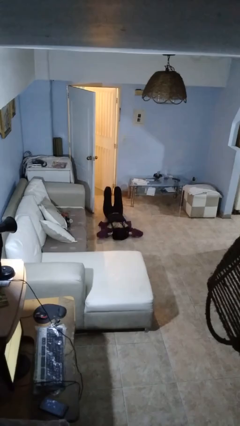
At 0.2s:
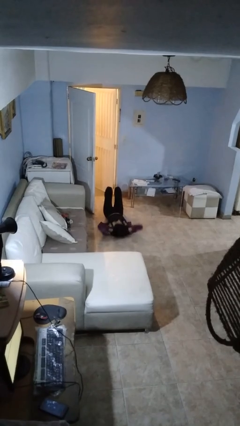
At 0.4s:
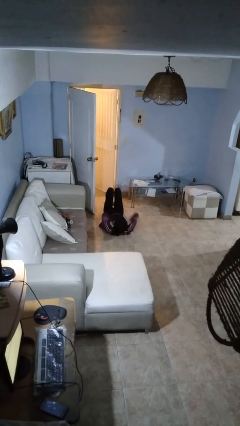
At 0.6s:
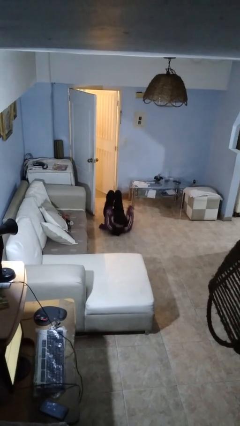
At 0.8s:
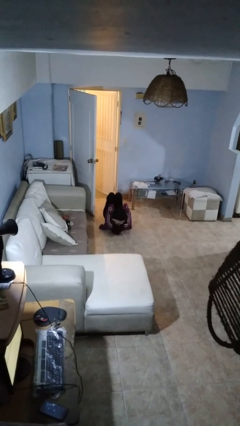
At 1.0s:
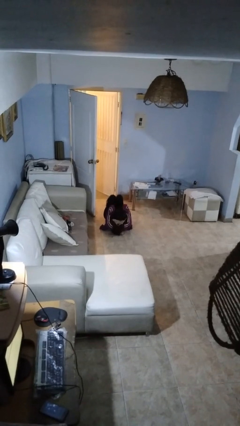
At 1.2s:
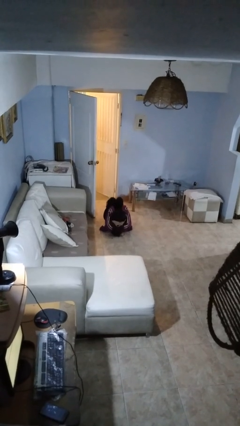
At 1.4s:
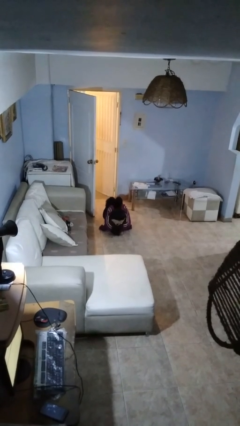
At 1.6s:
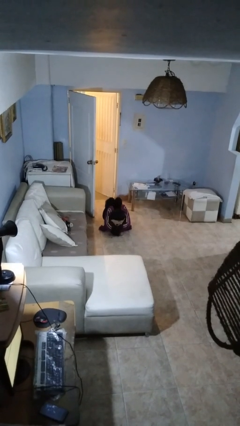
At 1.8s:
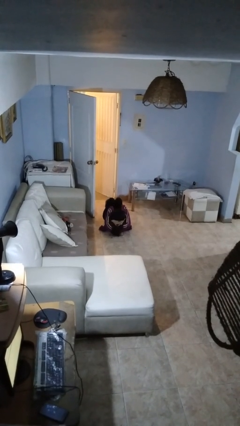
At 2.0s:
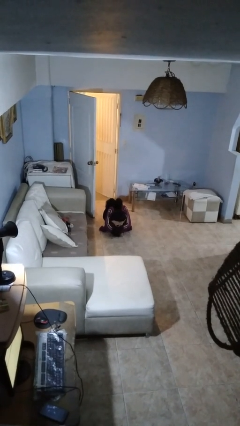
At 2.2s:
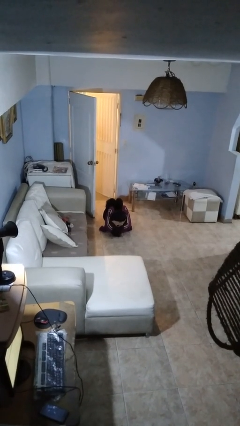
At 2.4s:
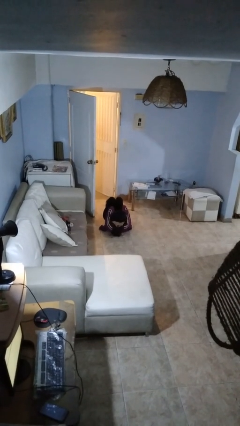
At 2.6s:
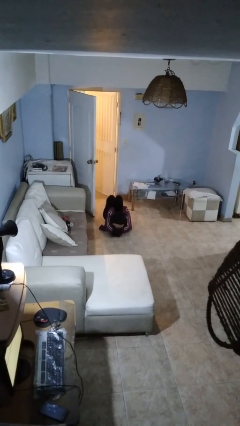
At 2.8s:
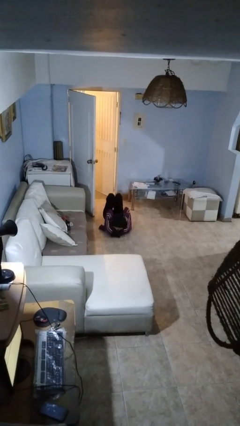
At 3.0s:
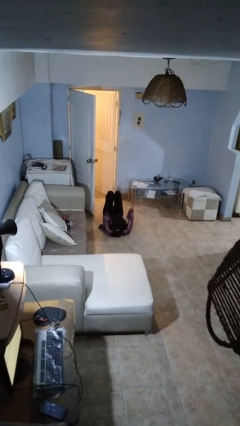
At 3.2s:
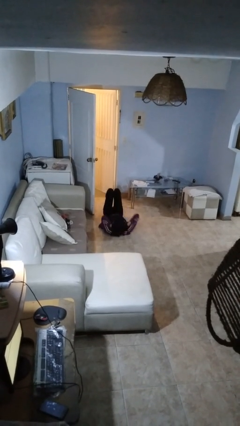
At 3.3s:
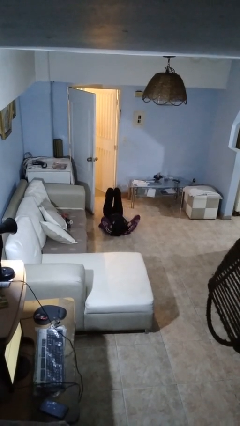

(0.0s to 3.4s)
person exercises with situp

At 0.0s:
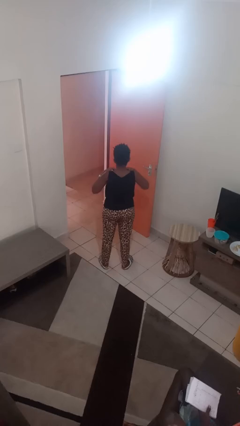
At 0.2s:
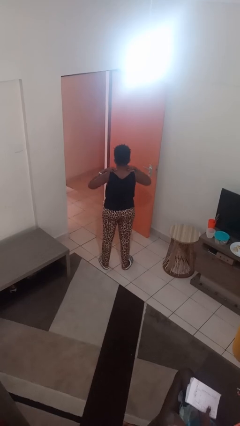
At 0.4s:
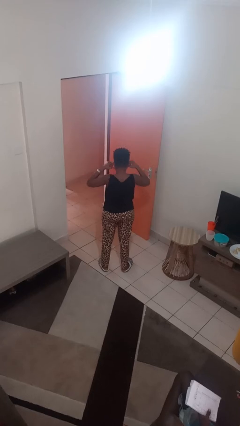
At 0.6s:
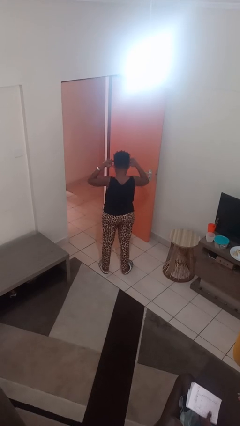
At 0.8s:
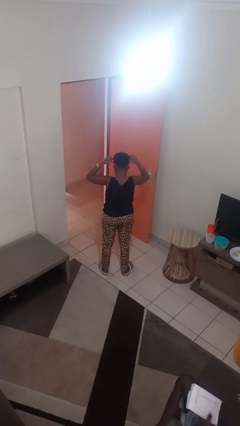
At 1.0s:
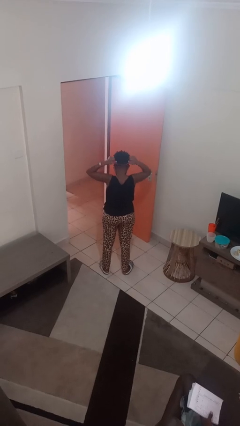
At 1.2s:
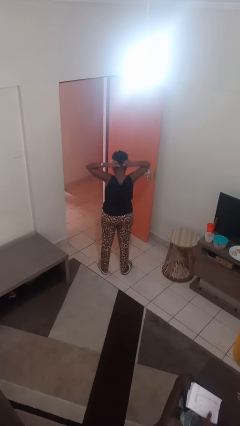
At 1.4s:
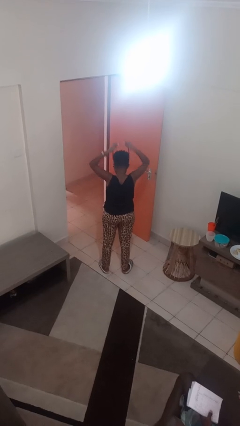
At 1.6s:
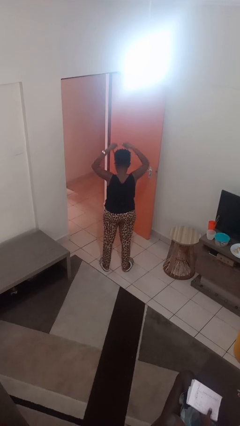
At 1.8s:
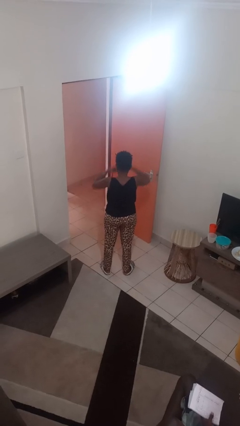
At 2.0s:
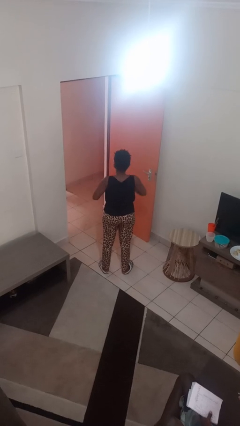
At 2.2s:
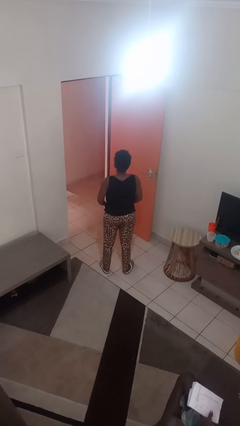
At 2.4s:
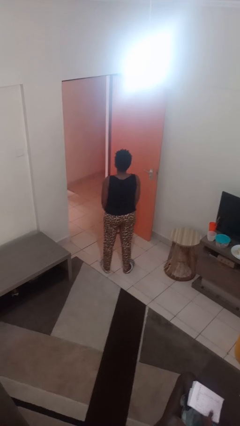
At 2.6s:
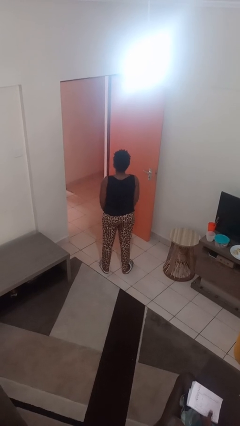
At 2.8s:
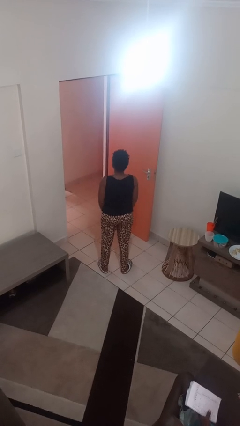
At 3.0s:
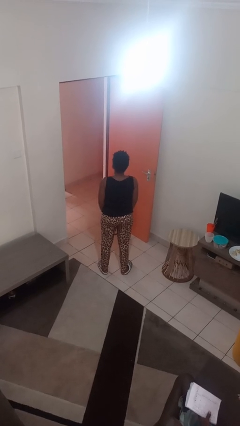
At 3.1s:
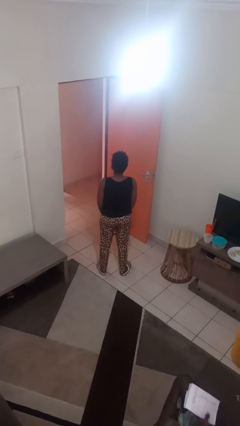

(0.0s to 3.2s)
person takes off necklace

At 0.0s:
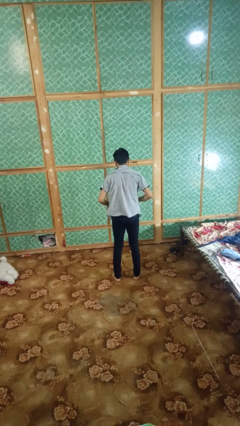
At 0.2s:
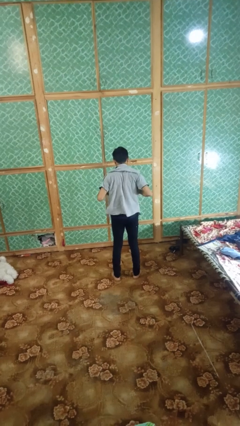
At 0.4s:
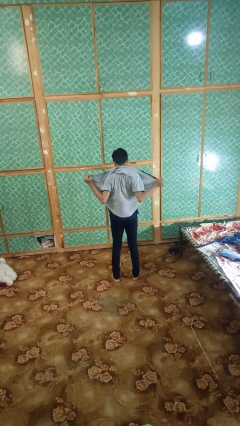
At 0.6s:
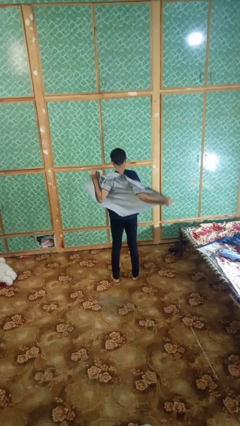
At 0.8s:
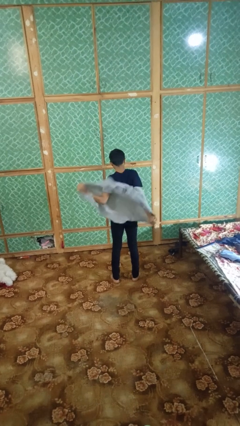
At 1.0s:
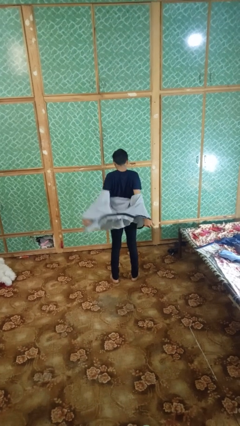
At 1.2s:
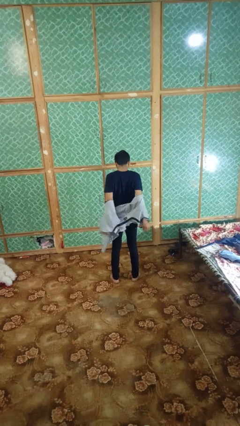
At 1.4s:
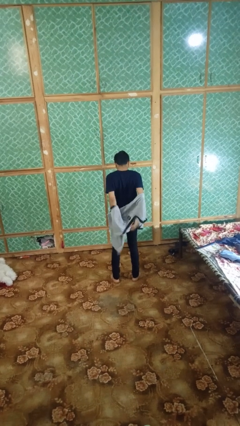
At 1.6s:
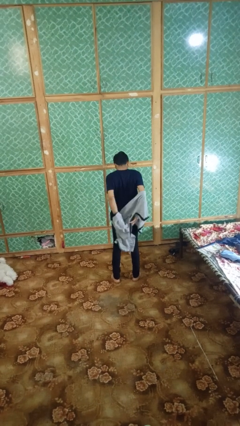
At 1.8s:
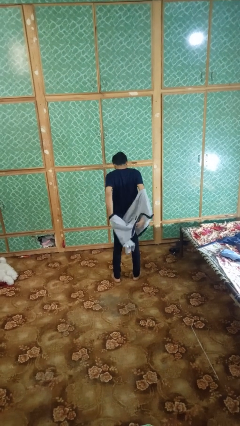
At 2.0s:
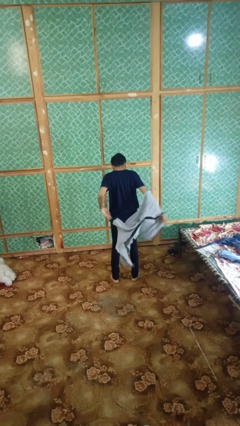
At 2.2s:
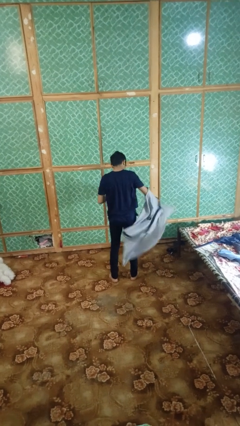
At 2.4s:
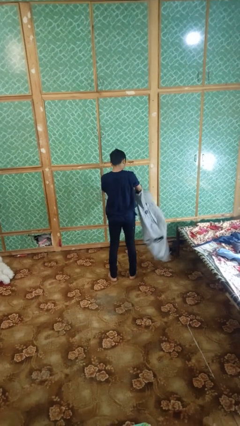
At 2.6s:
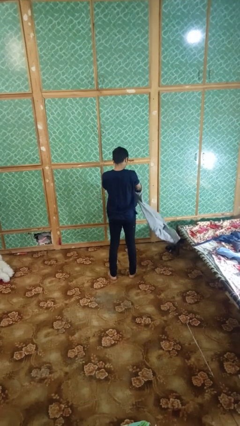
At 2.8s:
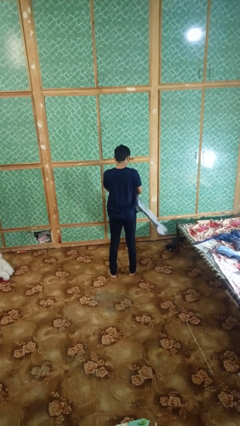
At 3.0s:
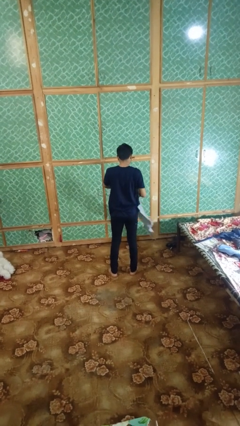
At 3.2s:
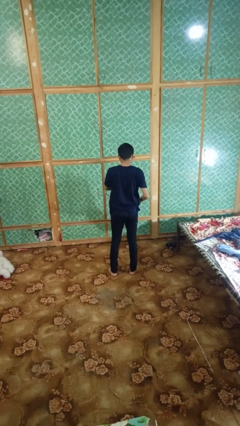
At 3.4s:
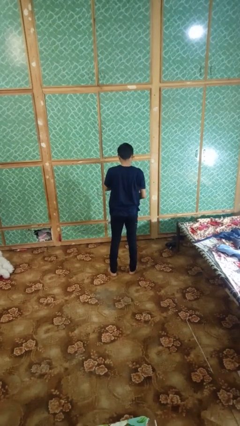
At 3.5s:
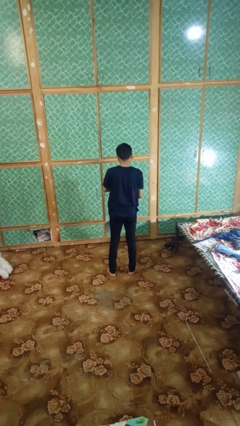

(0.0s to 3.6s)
person takes off shirt

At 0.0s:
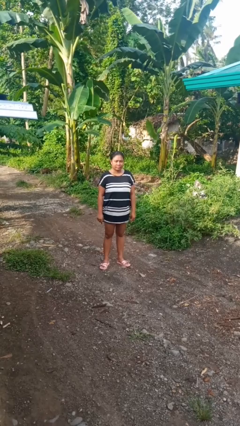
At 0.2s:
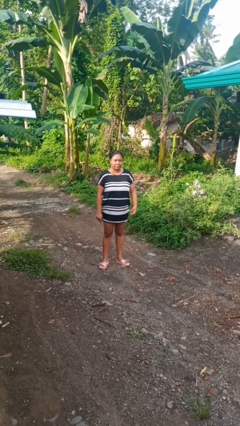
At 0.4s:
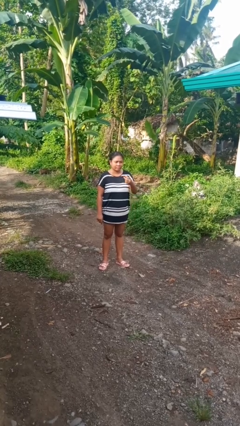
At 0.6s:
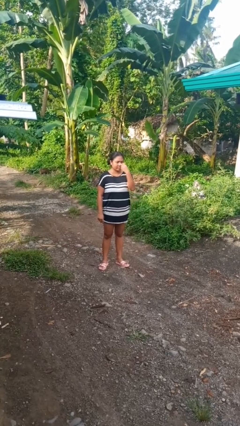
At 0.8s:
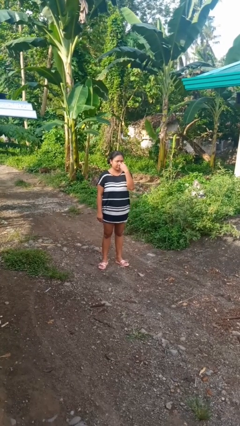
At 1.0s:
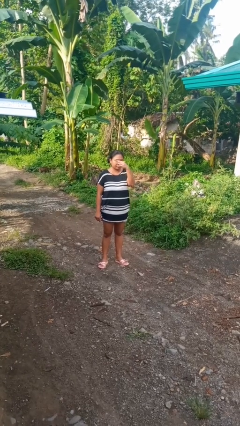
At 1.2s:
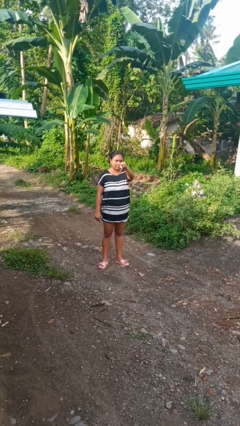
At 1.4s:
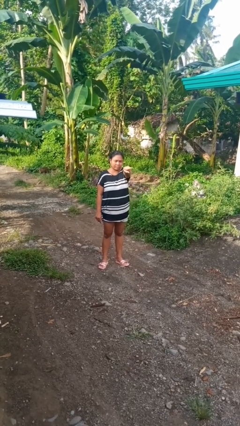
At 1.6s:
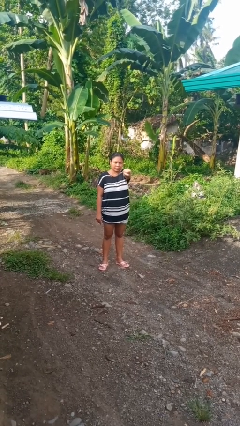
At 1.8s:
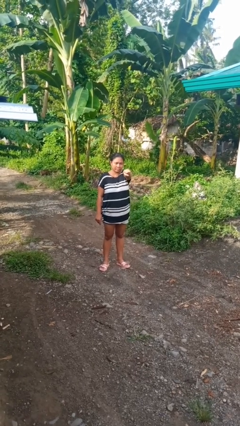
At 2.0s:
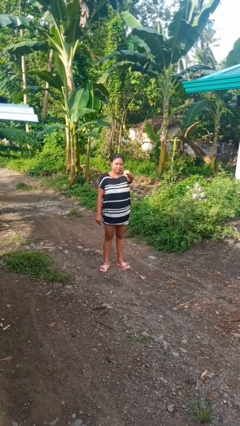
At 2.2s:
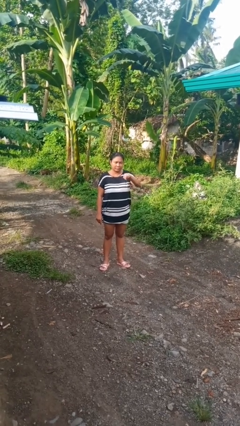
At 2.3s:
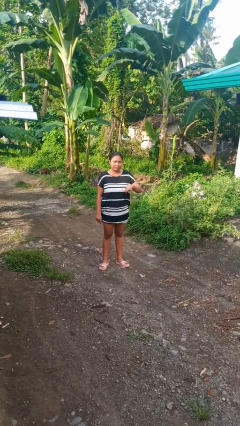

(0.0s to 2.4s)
person gestures watch closely

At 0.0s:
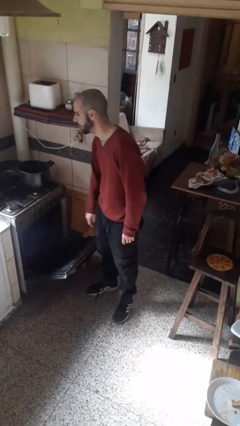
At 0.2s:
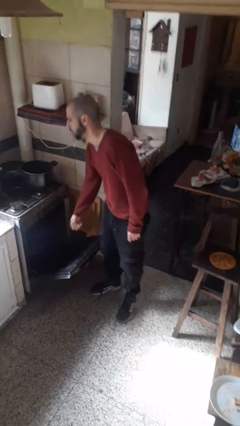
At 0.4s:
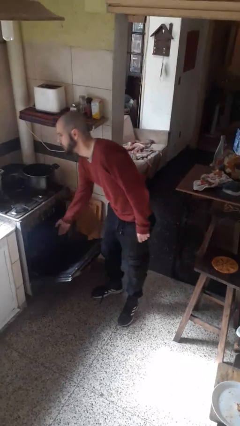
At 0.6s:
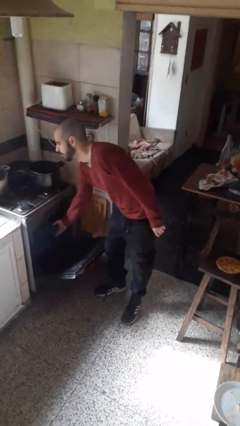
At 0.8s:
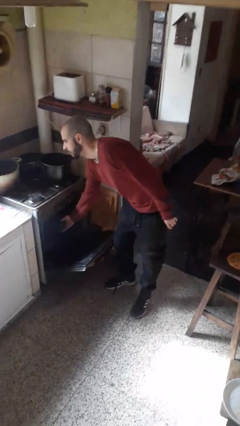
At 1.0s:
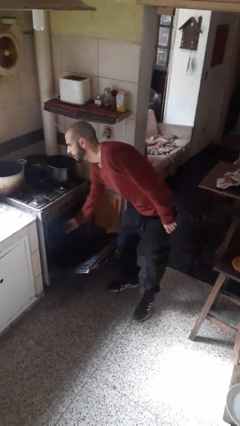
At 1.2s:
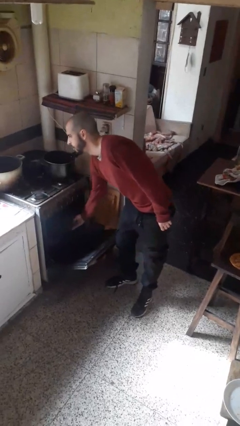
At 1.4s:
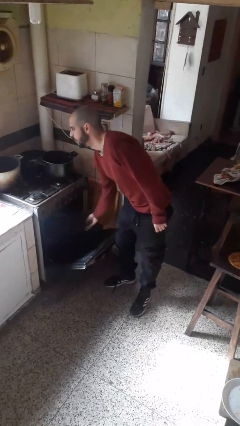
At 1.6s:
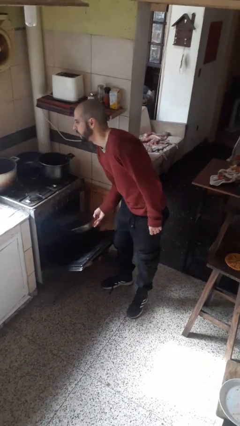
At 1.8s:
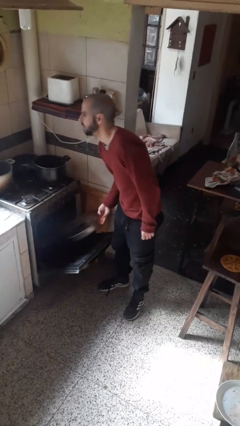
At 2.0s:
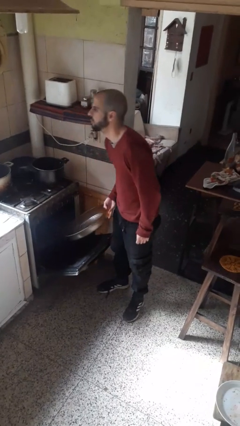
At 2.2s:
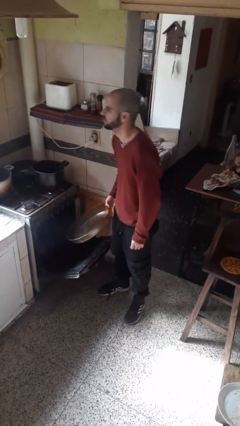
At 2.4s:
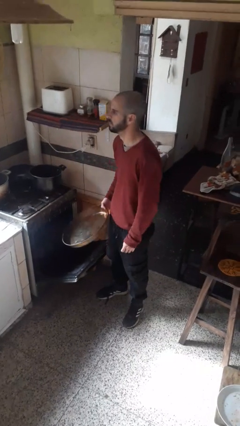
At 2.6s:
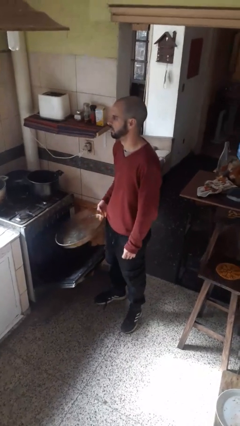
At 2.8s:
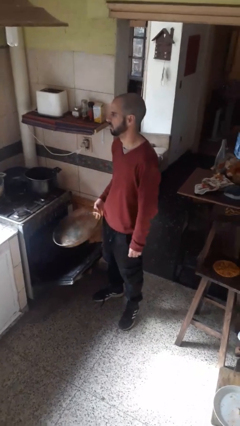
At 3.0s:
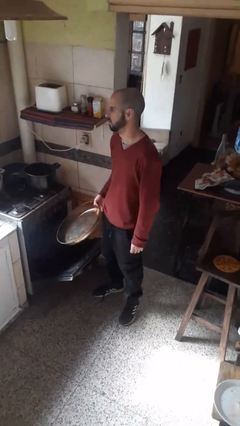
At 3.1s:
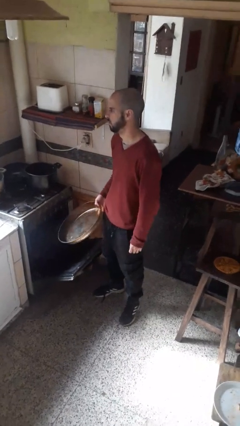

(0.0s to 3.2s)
person takes object from oven

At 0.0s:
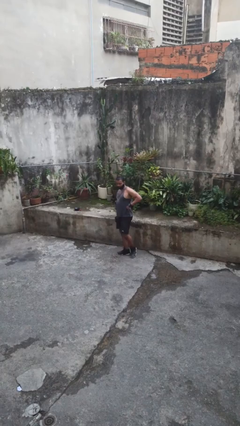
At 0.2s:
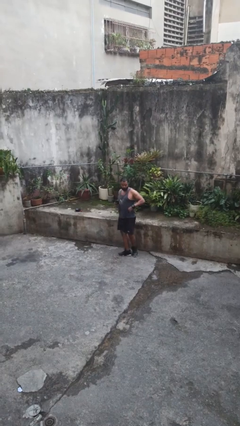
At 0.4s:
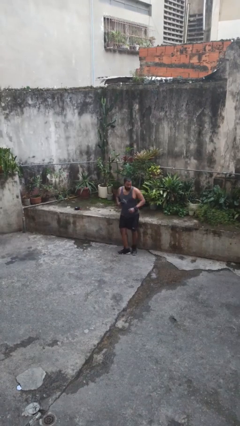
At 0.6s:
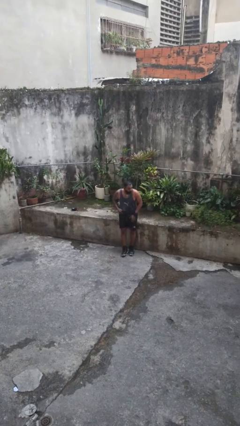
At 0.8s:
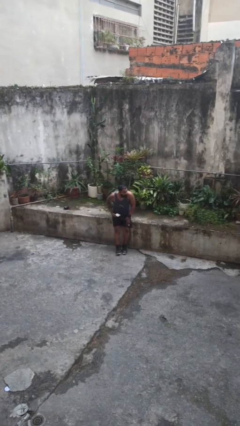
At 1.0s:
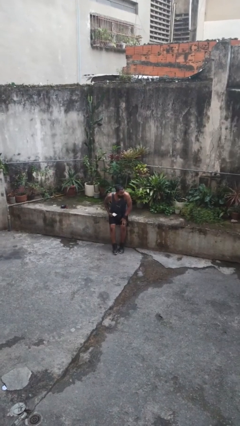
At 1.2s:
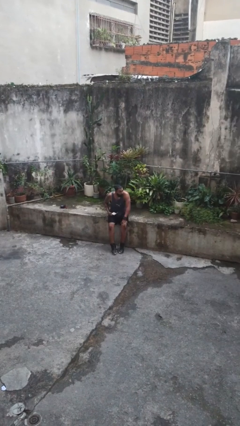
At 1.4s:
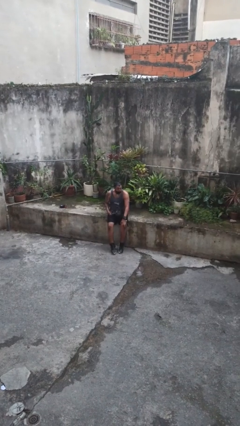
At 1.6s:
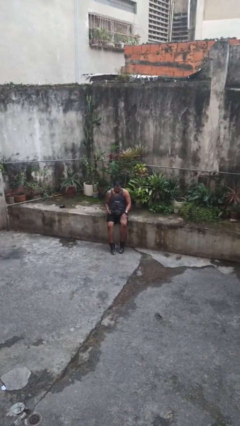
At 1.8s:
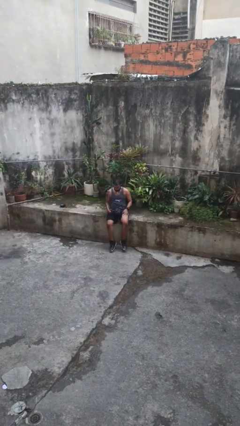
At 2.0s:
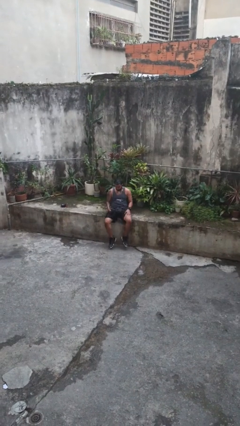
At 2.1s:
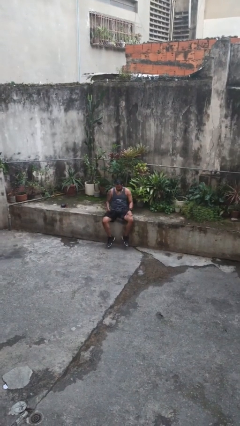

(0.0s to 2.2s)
person sits down
